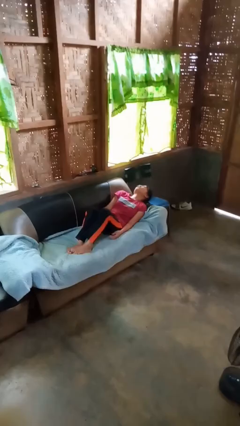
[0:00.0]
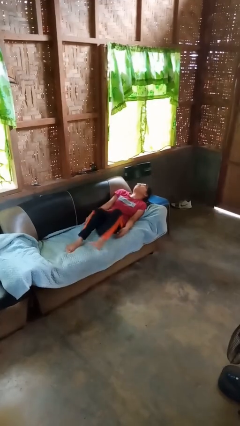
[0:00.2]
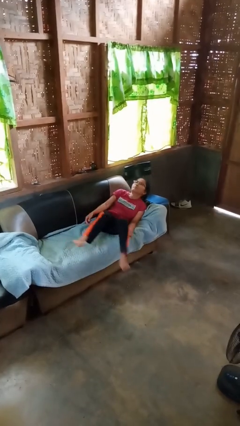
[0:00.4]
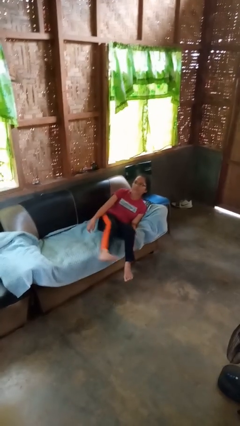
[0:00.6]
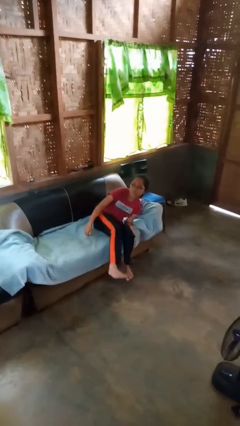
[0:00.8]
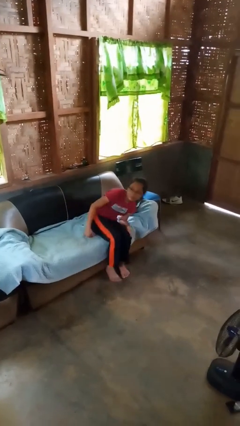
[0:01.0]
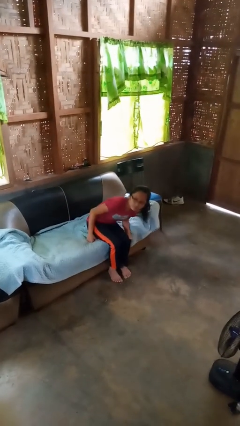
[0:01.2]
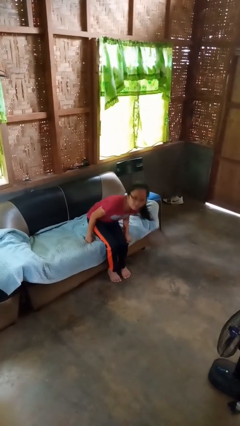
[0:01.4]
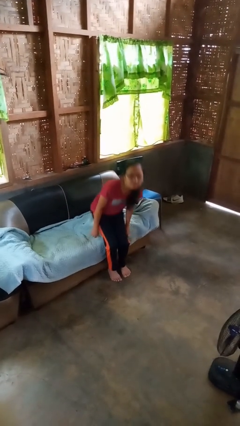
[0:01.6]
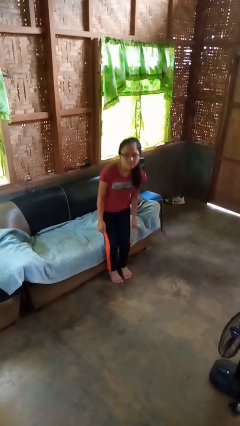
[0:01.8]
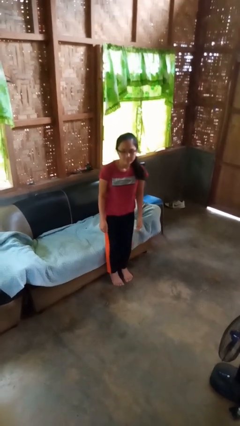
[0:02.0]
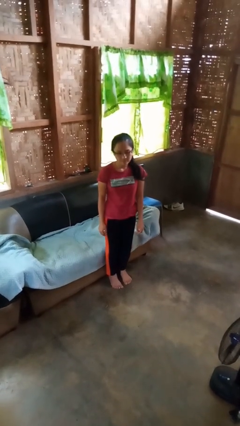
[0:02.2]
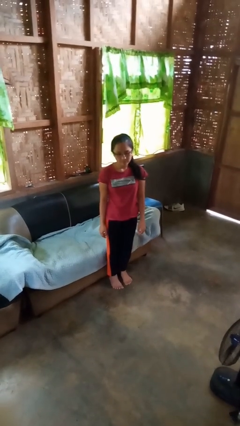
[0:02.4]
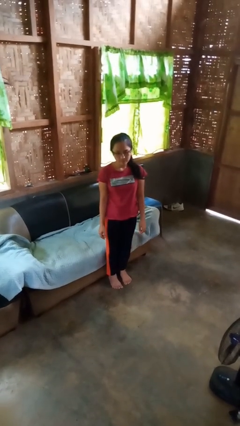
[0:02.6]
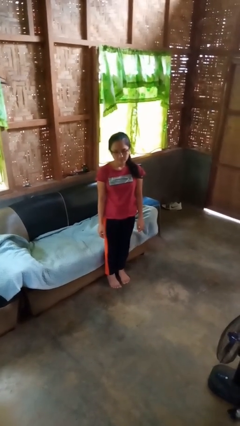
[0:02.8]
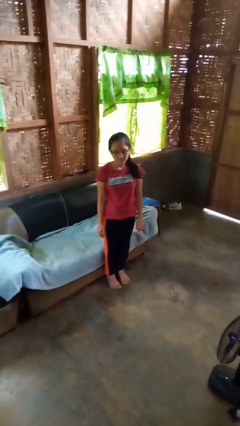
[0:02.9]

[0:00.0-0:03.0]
person stands up

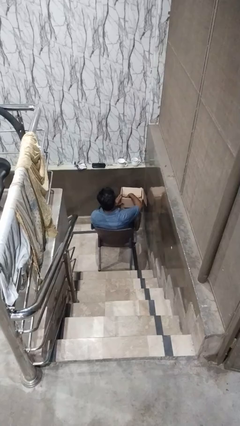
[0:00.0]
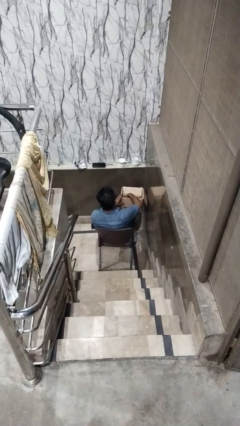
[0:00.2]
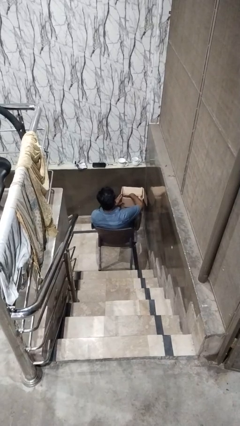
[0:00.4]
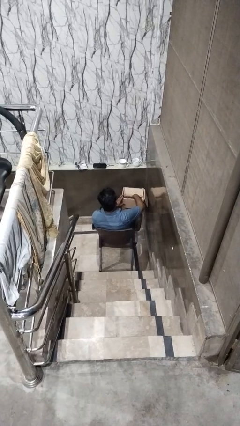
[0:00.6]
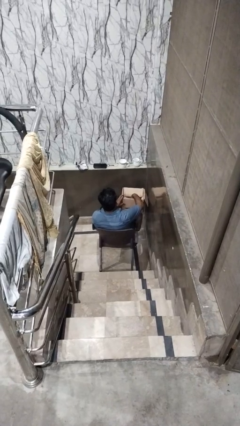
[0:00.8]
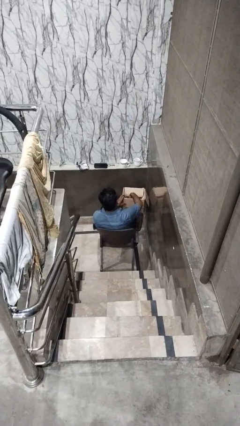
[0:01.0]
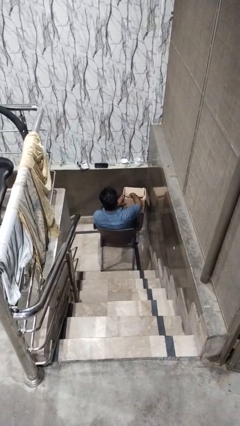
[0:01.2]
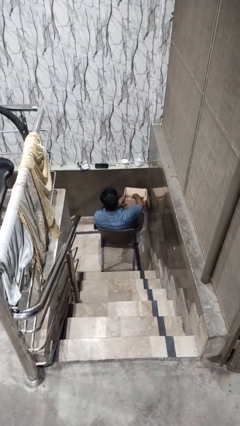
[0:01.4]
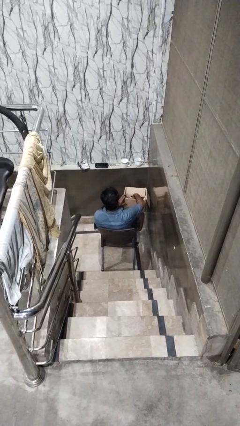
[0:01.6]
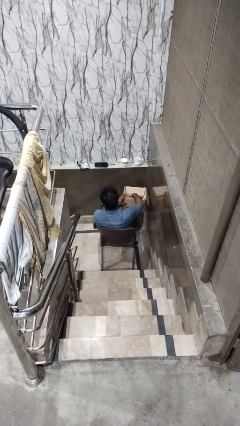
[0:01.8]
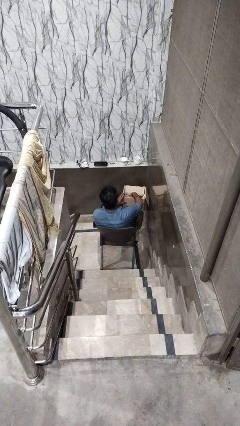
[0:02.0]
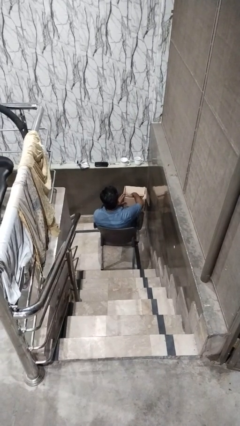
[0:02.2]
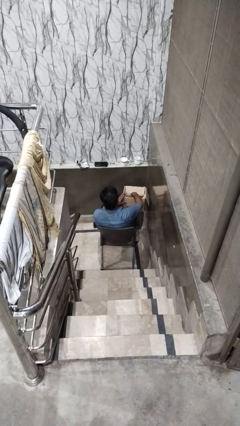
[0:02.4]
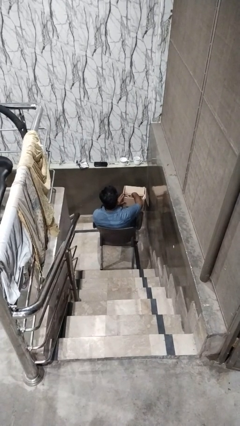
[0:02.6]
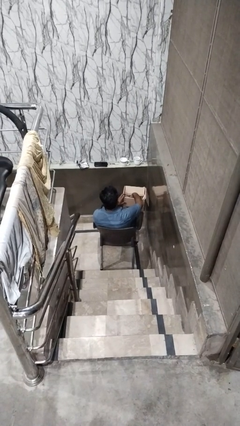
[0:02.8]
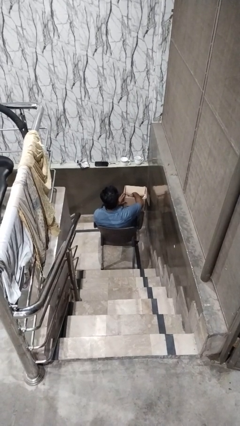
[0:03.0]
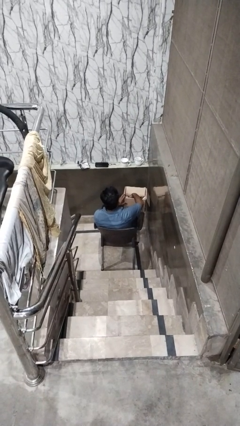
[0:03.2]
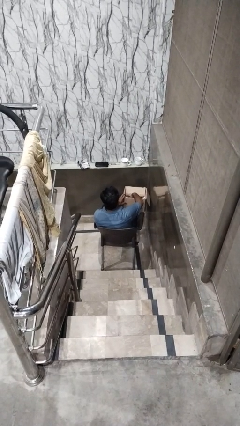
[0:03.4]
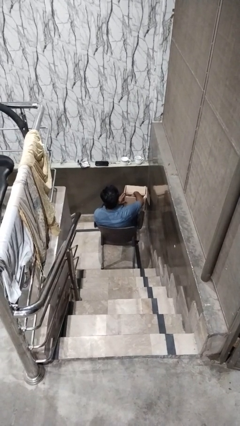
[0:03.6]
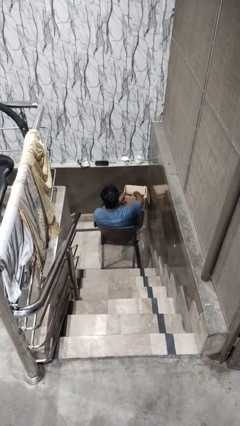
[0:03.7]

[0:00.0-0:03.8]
person searches in box

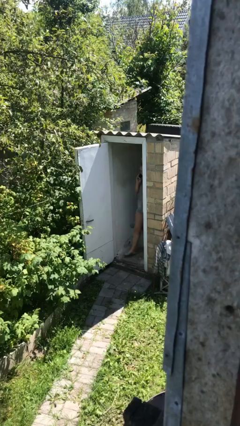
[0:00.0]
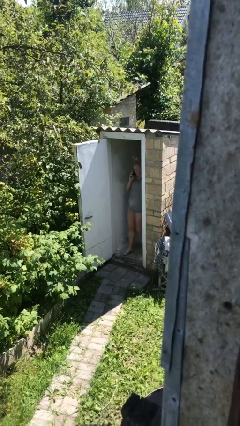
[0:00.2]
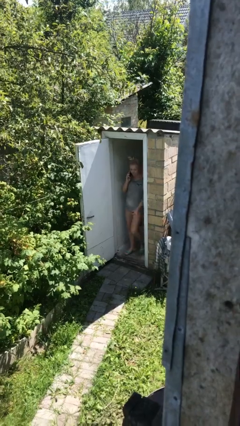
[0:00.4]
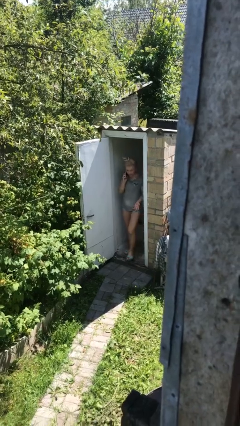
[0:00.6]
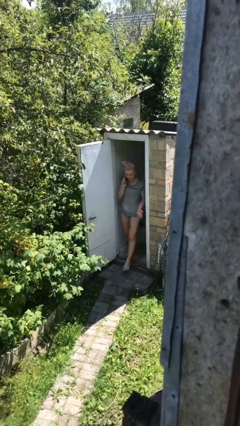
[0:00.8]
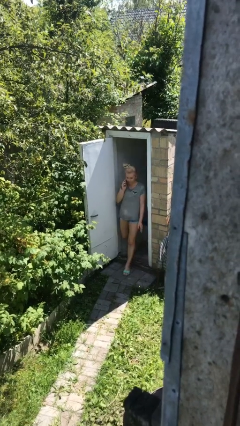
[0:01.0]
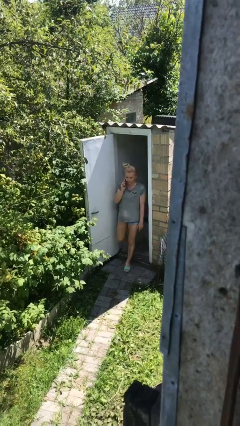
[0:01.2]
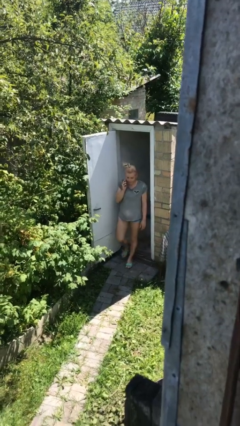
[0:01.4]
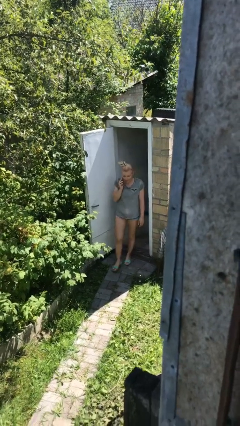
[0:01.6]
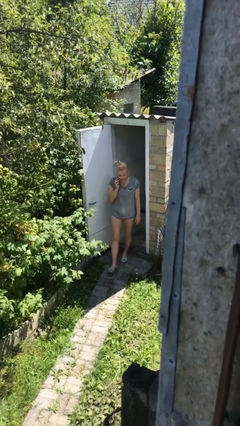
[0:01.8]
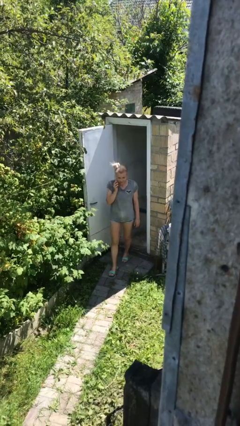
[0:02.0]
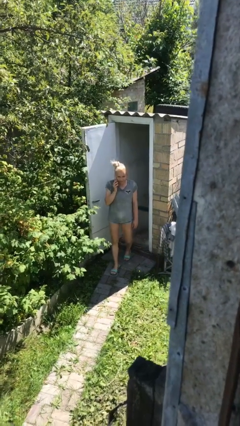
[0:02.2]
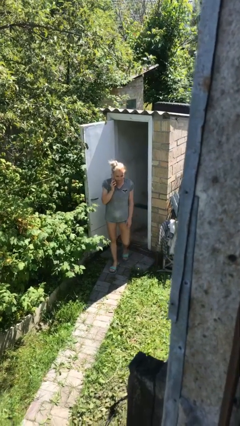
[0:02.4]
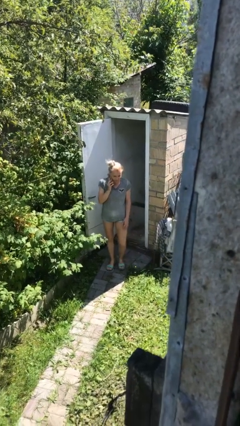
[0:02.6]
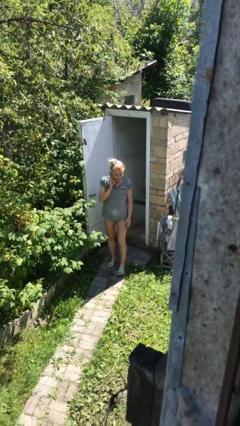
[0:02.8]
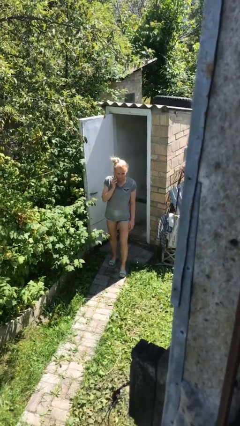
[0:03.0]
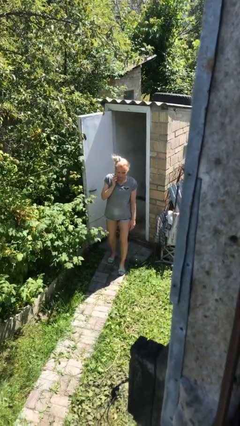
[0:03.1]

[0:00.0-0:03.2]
person enters scene through structure

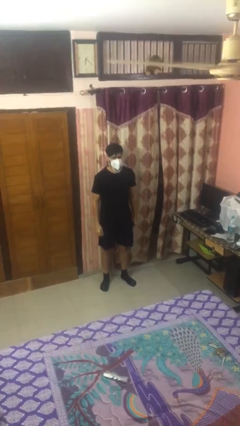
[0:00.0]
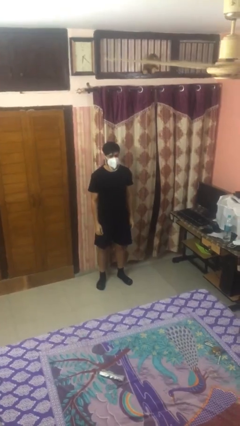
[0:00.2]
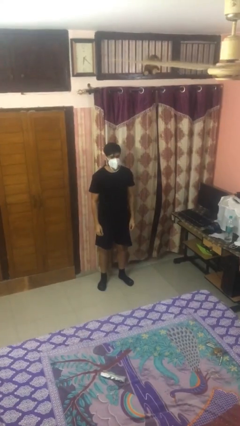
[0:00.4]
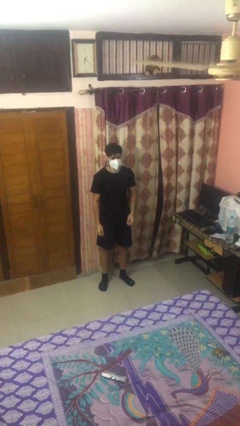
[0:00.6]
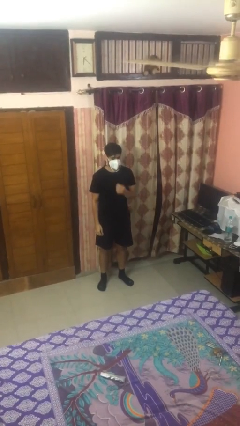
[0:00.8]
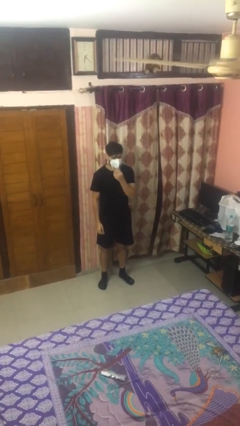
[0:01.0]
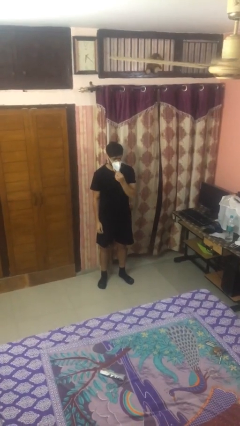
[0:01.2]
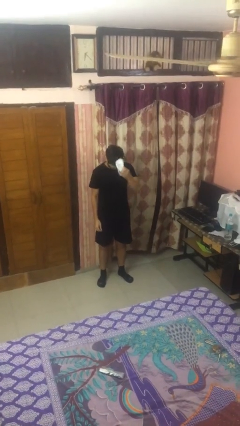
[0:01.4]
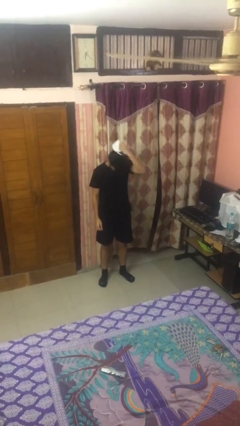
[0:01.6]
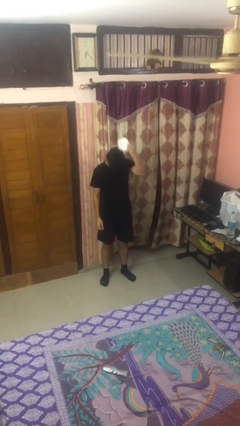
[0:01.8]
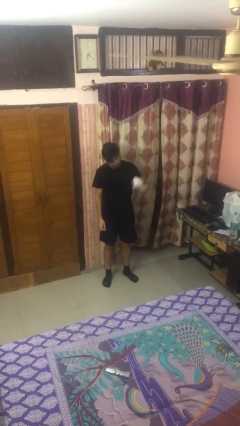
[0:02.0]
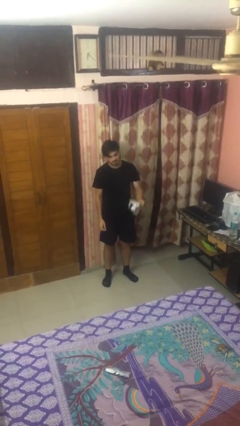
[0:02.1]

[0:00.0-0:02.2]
person takes off facemask

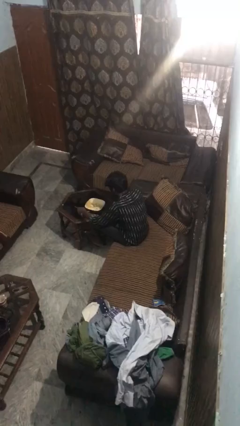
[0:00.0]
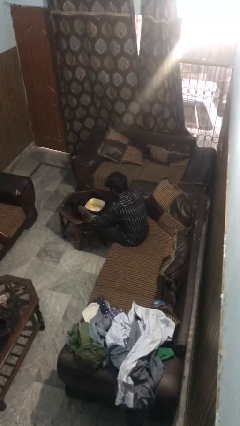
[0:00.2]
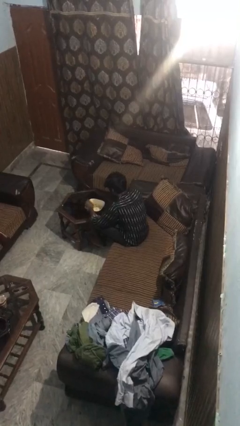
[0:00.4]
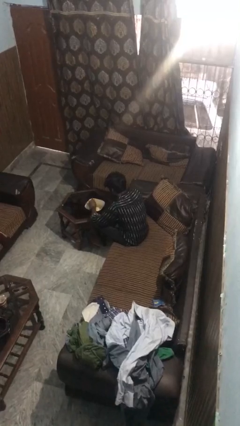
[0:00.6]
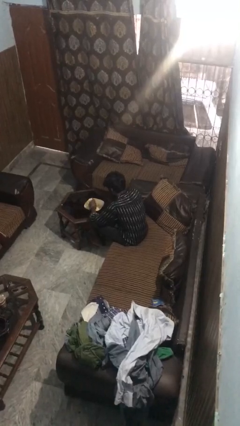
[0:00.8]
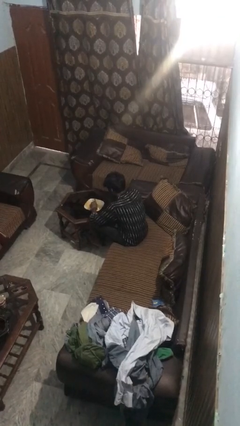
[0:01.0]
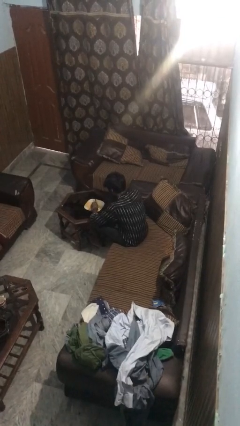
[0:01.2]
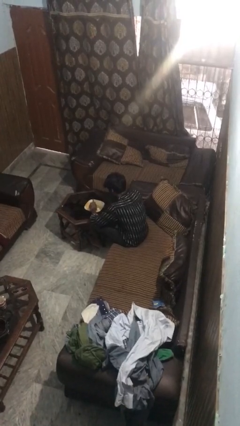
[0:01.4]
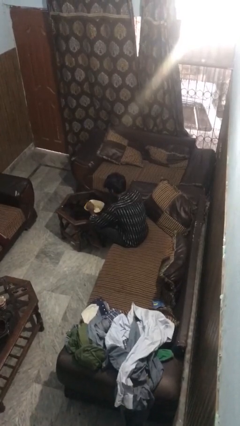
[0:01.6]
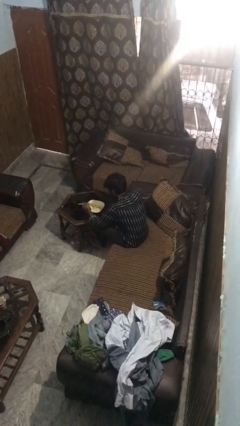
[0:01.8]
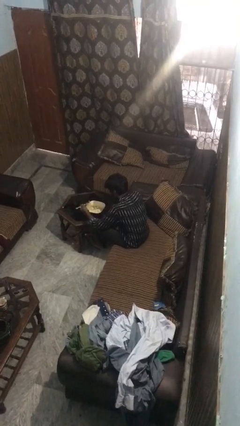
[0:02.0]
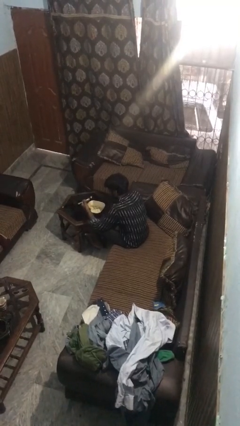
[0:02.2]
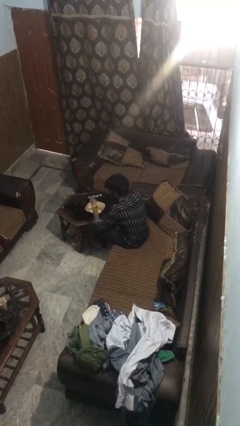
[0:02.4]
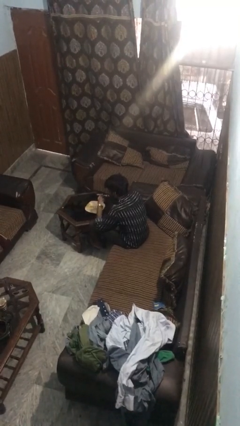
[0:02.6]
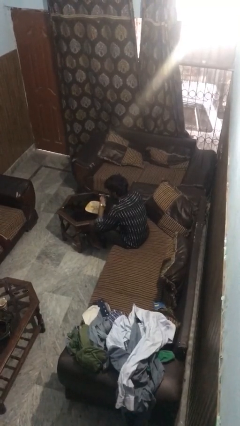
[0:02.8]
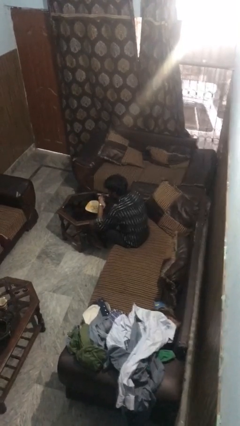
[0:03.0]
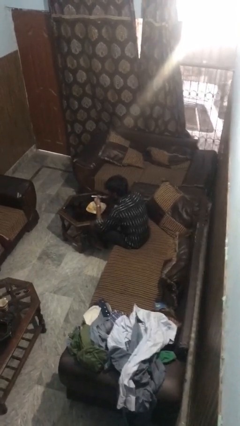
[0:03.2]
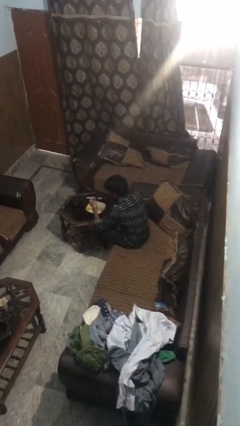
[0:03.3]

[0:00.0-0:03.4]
person eats with utensil

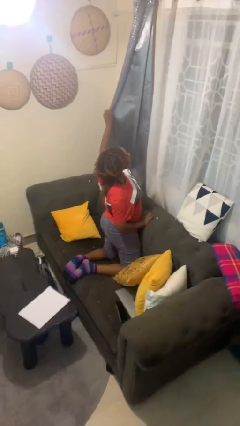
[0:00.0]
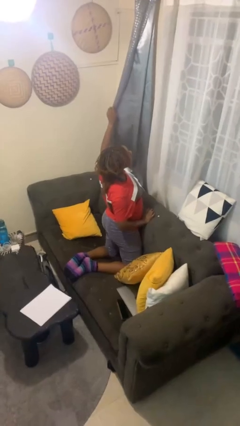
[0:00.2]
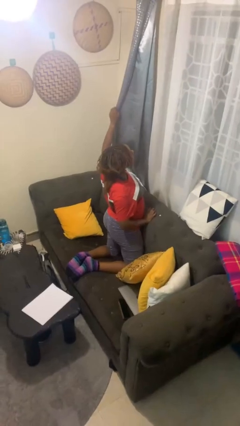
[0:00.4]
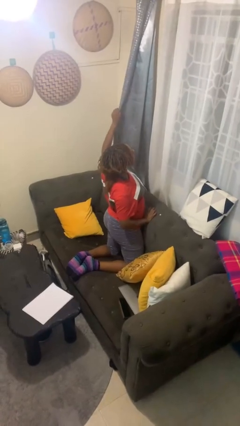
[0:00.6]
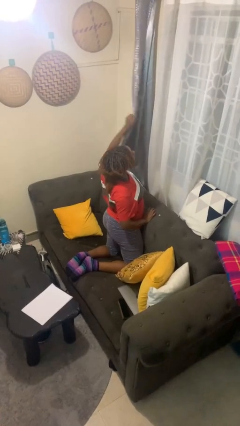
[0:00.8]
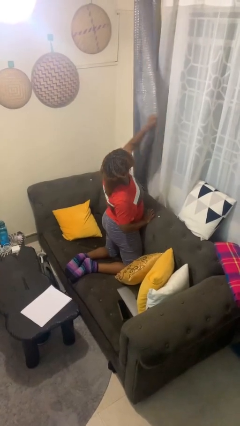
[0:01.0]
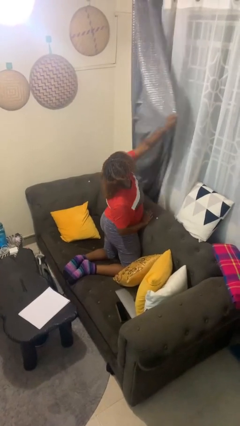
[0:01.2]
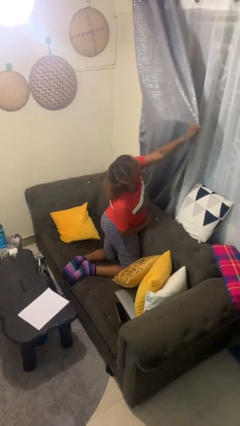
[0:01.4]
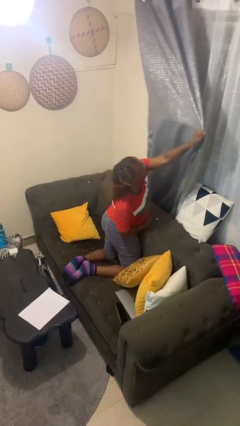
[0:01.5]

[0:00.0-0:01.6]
person closes curtains

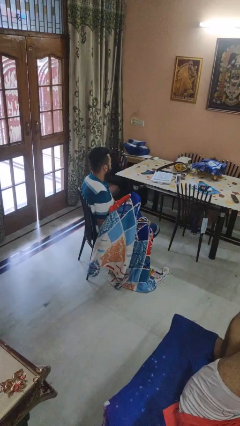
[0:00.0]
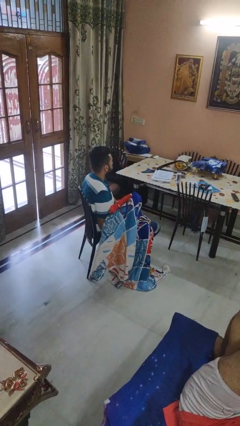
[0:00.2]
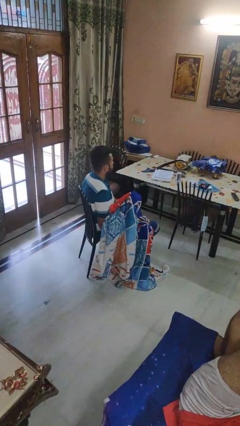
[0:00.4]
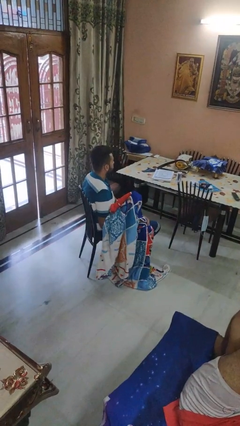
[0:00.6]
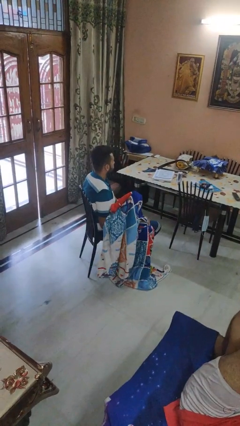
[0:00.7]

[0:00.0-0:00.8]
person covers with blanket
